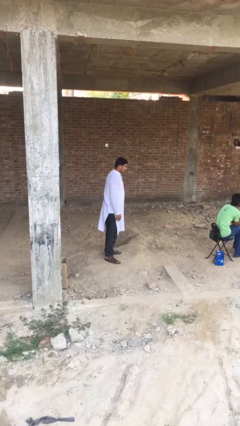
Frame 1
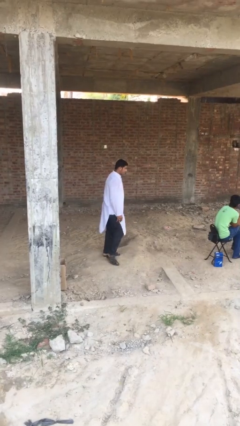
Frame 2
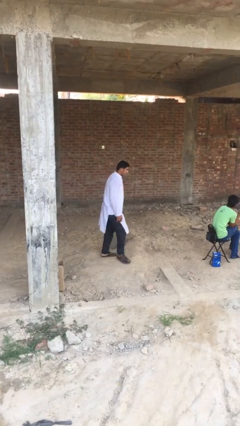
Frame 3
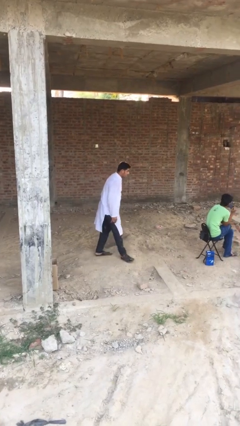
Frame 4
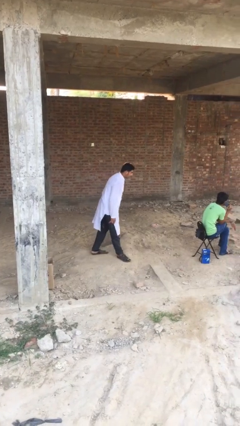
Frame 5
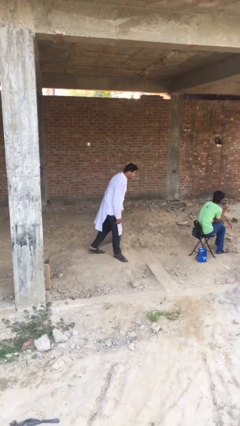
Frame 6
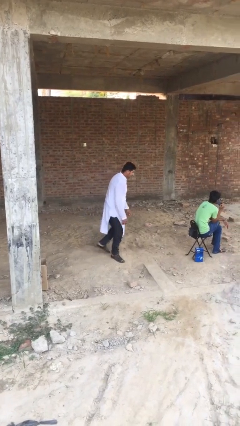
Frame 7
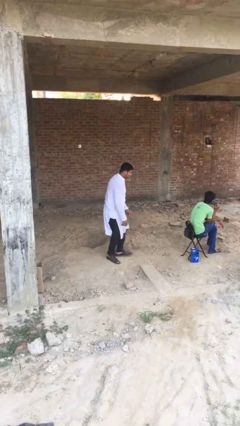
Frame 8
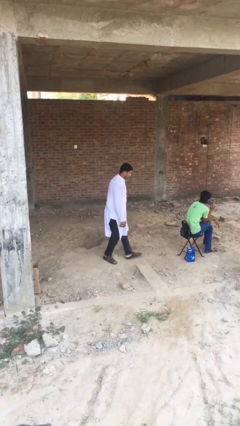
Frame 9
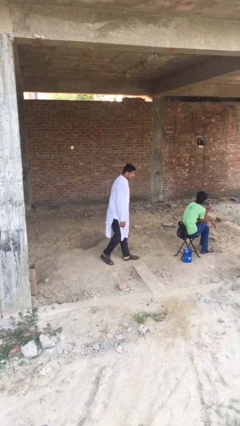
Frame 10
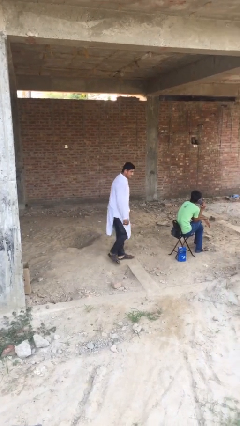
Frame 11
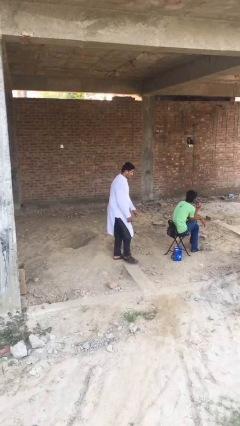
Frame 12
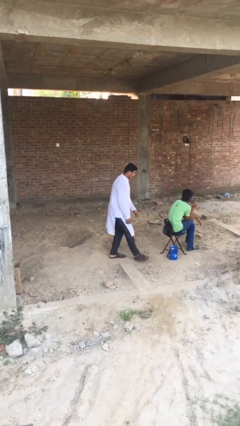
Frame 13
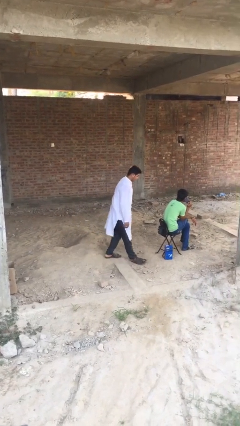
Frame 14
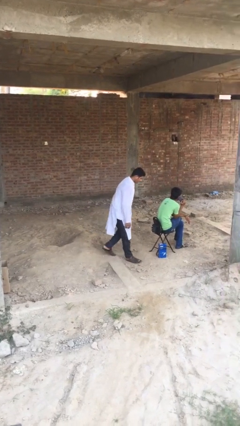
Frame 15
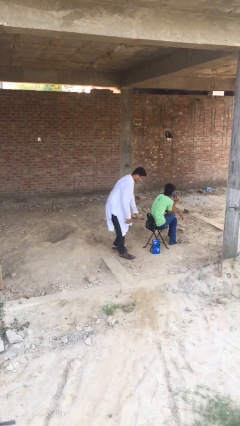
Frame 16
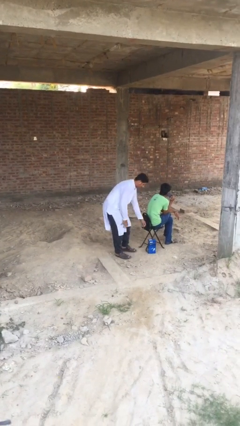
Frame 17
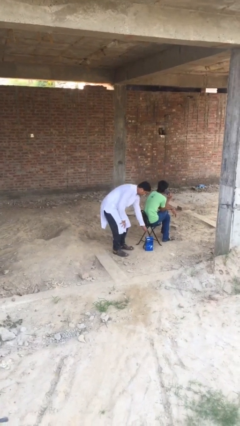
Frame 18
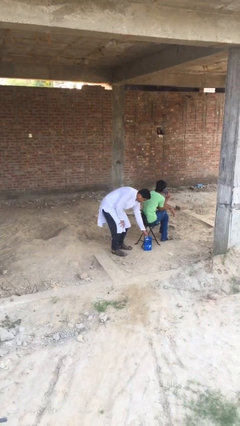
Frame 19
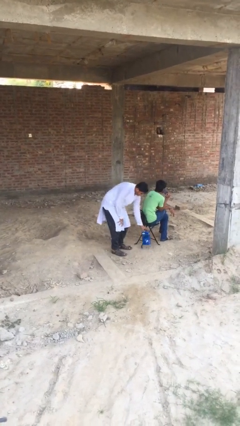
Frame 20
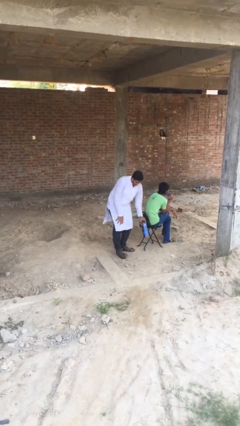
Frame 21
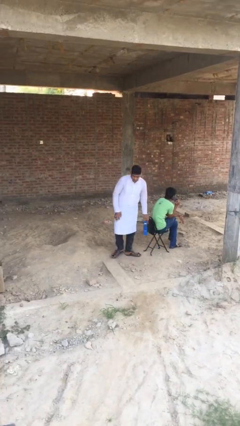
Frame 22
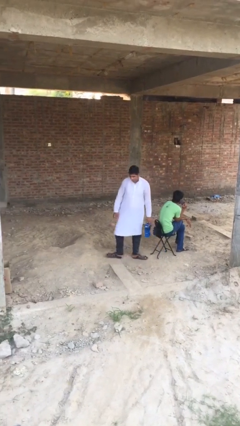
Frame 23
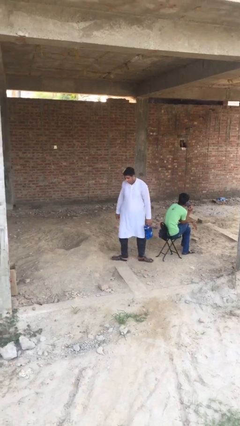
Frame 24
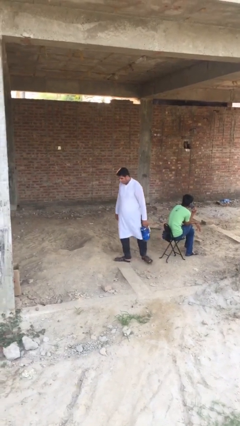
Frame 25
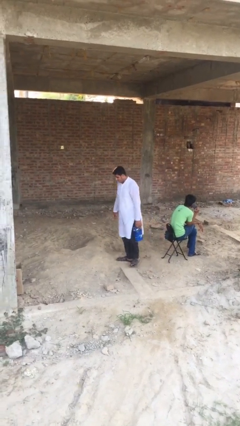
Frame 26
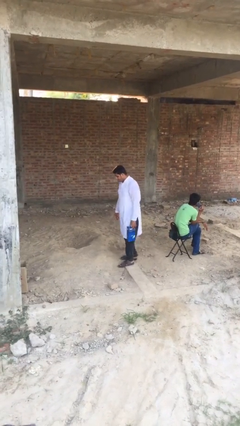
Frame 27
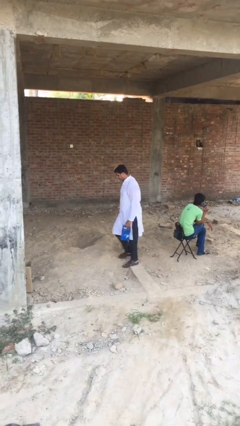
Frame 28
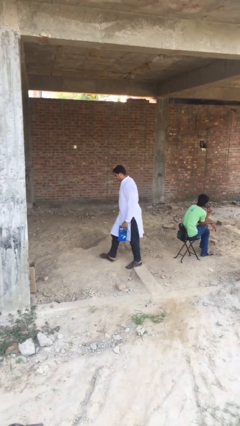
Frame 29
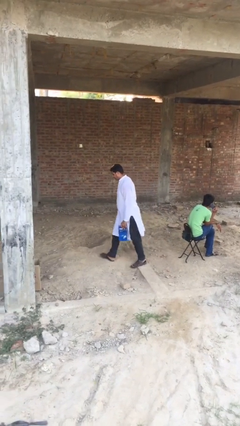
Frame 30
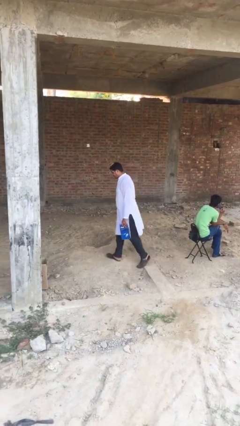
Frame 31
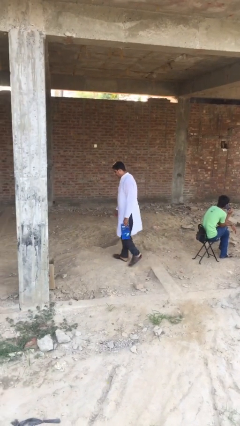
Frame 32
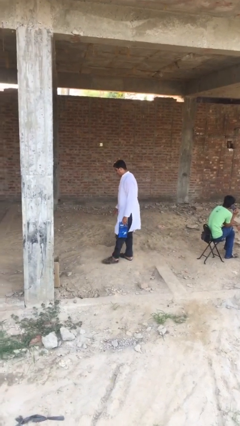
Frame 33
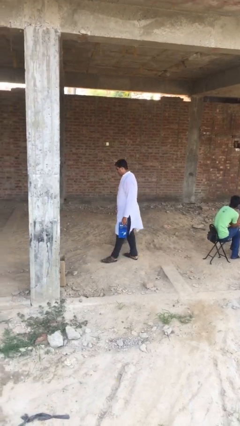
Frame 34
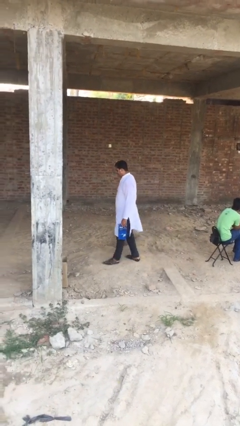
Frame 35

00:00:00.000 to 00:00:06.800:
person steals object from person

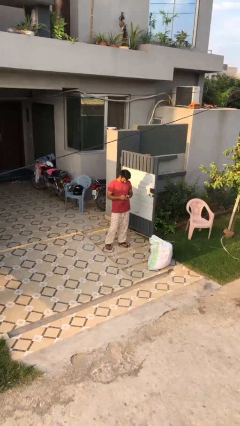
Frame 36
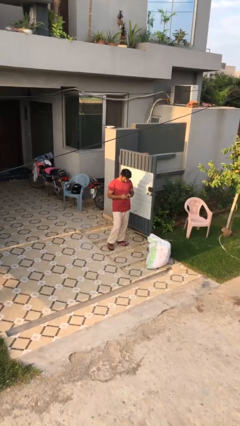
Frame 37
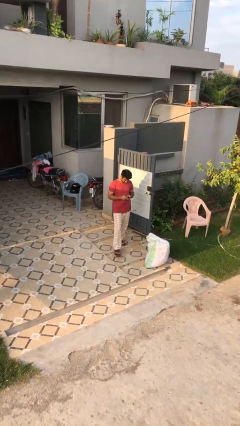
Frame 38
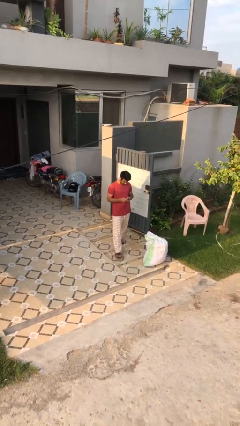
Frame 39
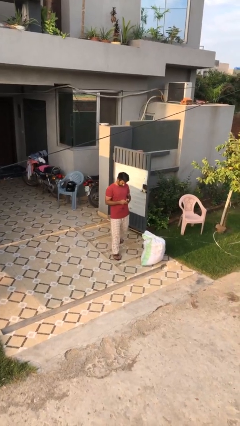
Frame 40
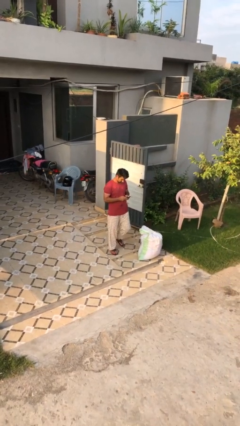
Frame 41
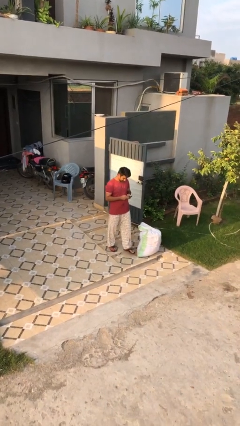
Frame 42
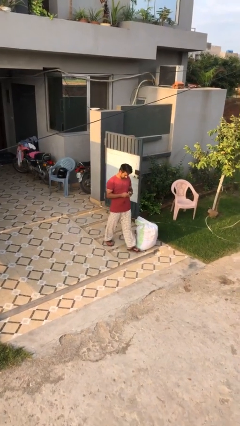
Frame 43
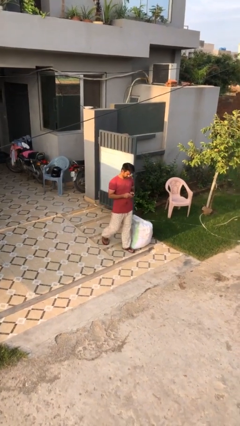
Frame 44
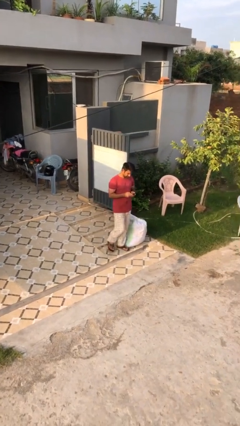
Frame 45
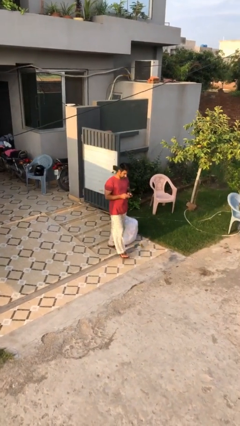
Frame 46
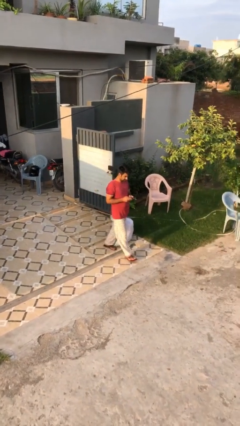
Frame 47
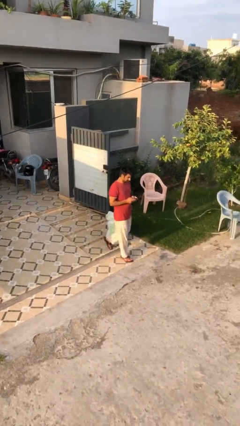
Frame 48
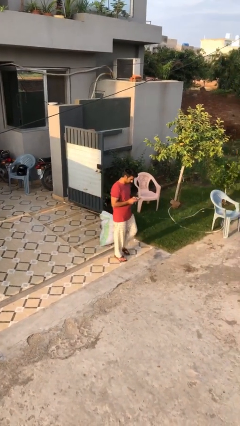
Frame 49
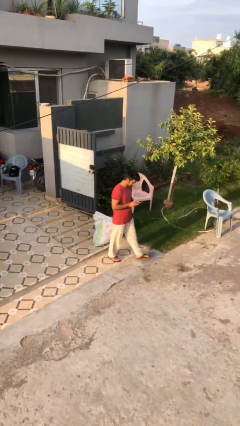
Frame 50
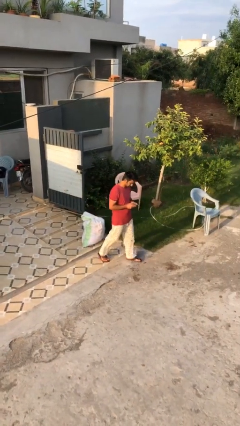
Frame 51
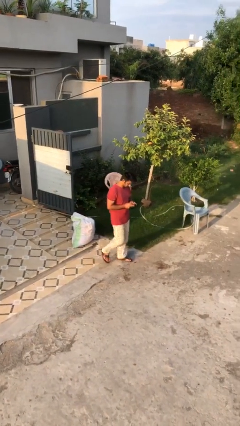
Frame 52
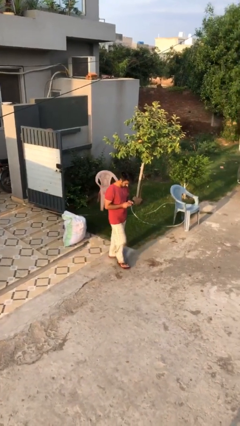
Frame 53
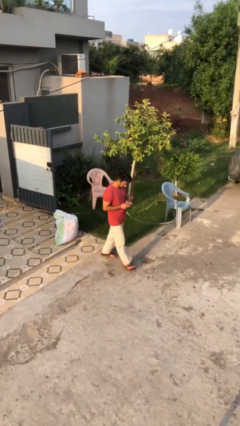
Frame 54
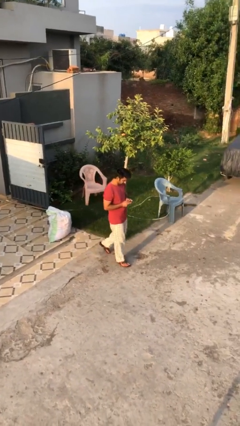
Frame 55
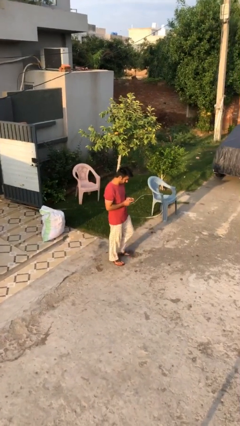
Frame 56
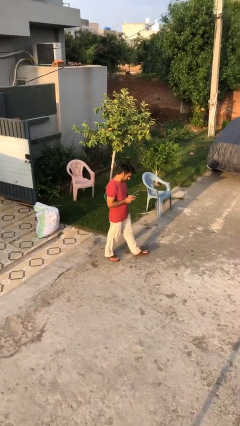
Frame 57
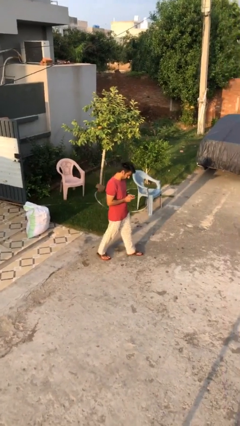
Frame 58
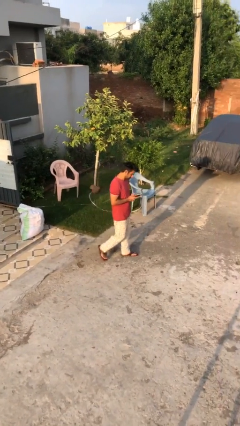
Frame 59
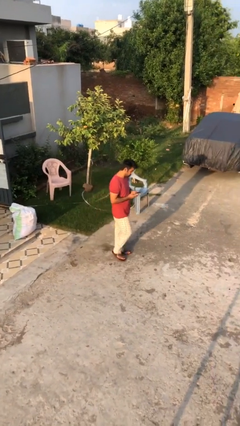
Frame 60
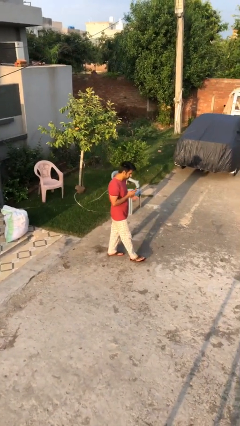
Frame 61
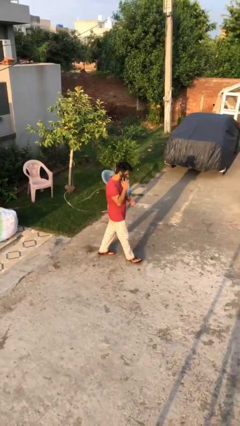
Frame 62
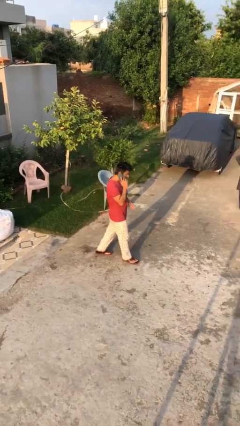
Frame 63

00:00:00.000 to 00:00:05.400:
person texts on phone

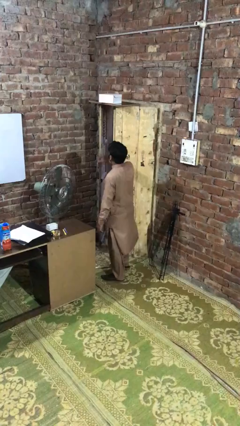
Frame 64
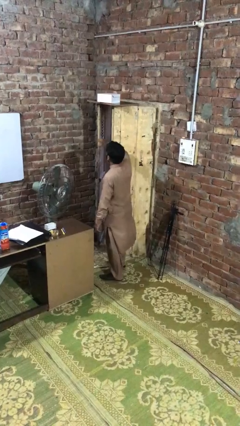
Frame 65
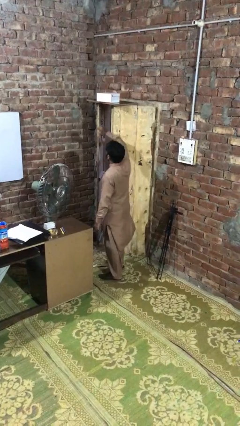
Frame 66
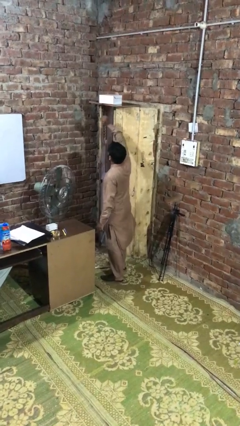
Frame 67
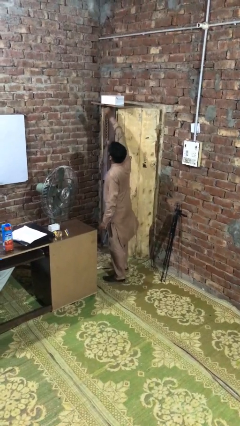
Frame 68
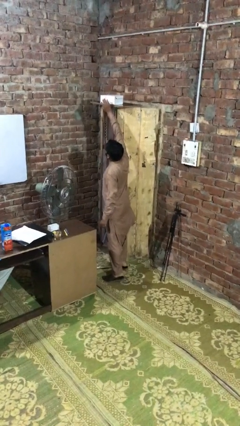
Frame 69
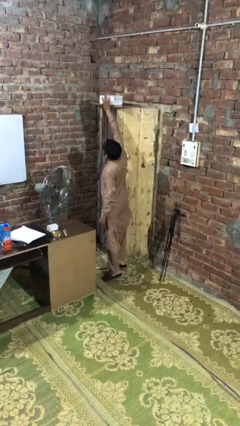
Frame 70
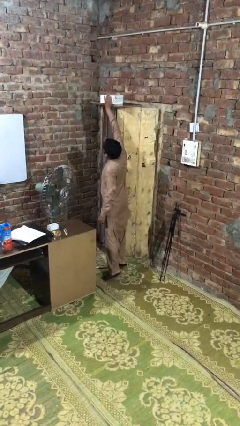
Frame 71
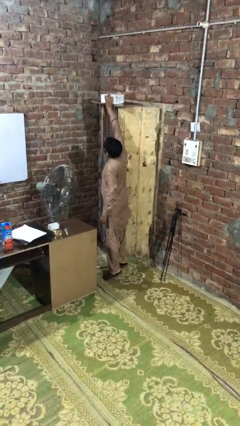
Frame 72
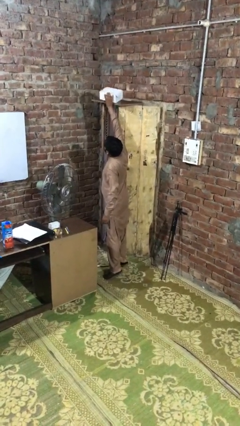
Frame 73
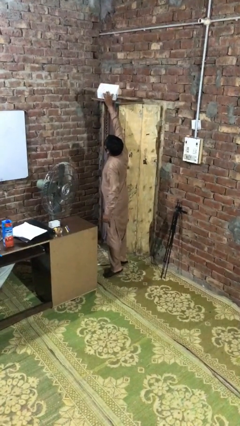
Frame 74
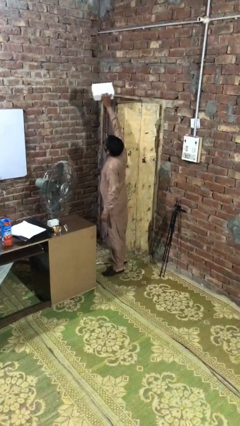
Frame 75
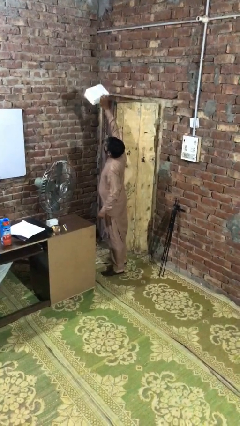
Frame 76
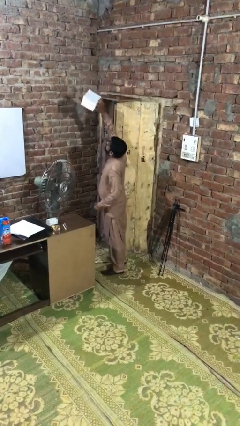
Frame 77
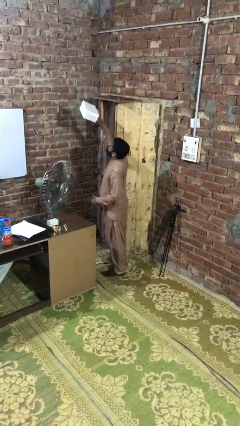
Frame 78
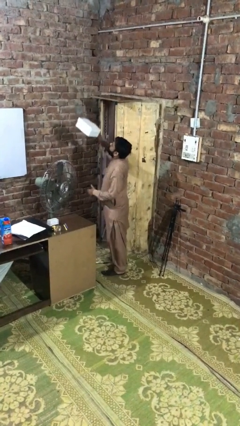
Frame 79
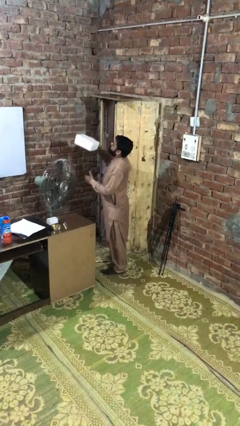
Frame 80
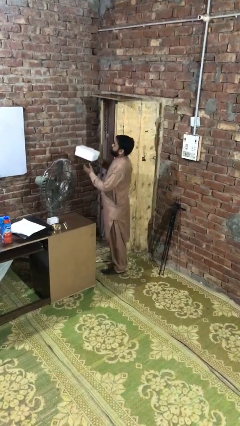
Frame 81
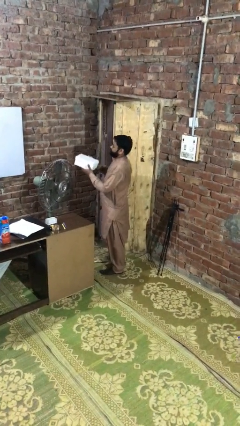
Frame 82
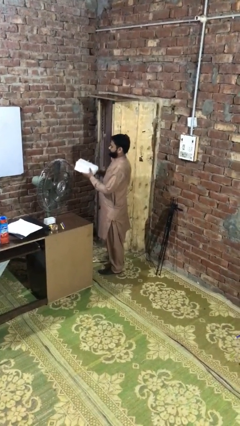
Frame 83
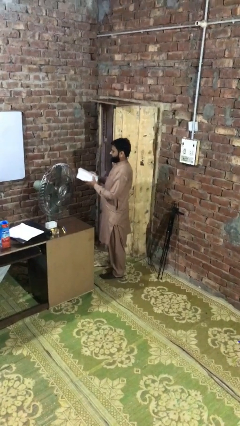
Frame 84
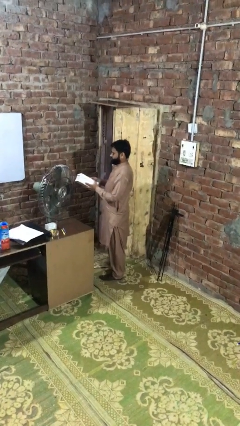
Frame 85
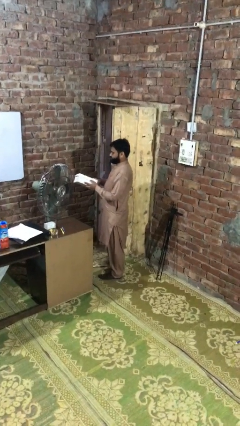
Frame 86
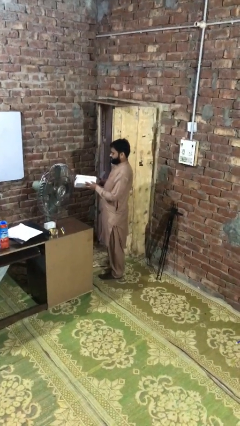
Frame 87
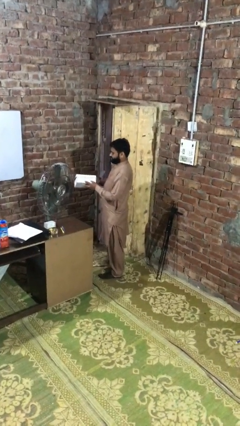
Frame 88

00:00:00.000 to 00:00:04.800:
person picks up object from shelf

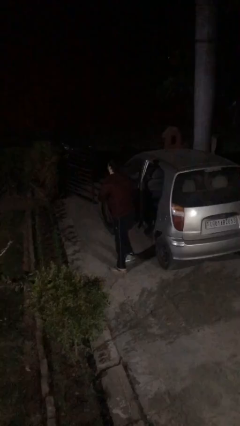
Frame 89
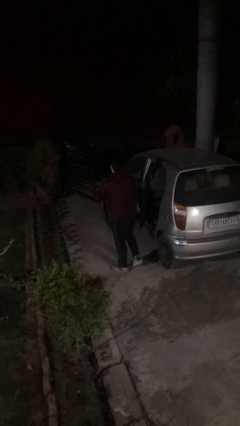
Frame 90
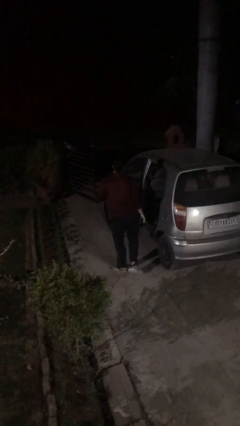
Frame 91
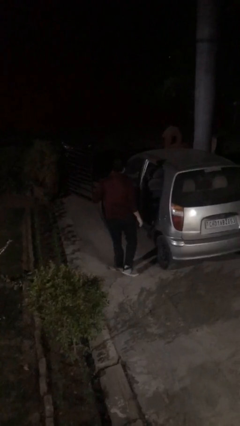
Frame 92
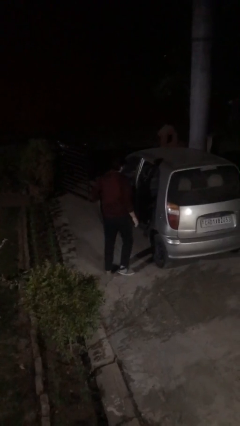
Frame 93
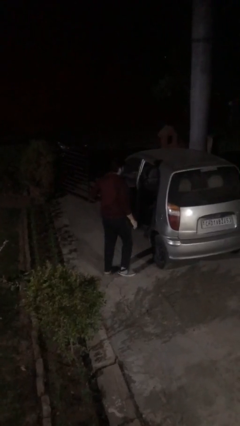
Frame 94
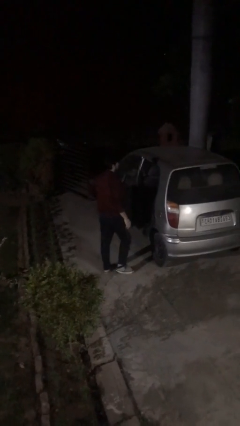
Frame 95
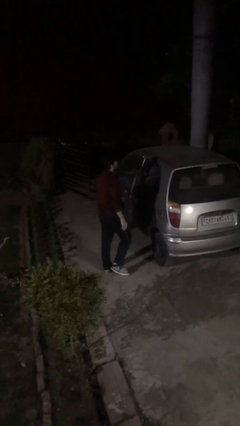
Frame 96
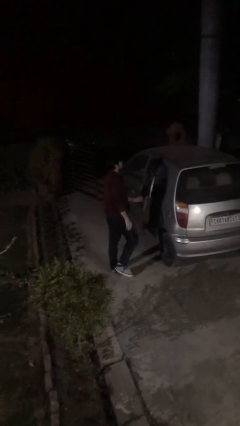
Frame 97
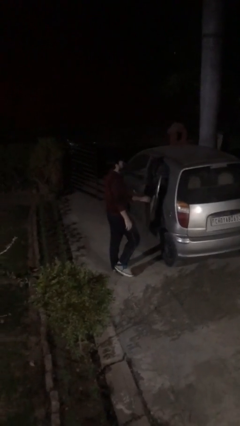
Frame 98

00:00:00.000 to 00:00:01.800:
person closes car door
